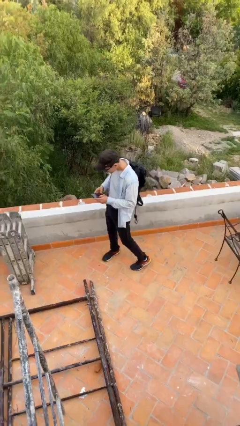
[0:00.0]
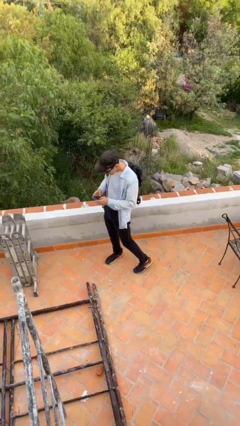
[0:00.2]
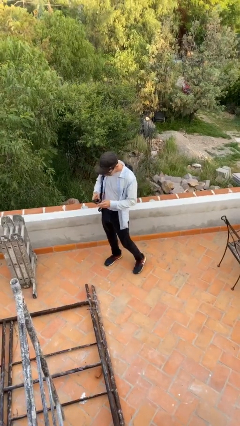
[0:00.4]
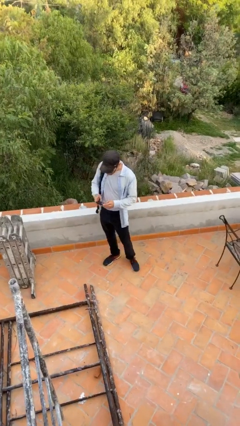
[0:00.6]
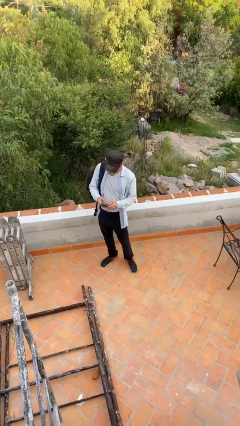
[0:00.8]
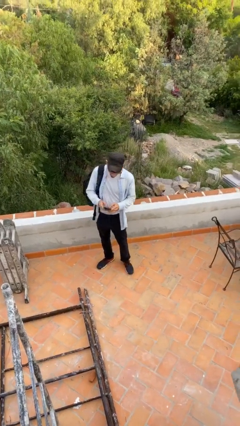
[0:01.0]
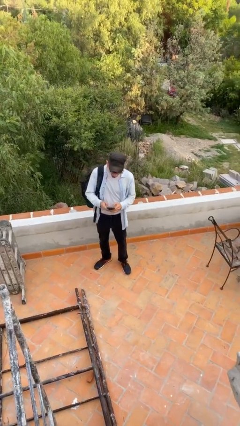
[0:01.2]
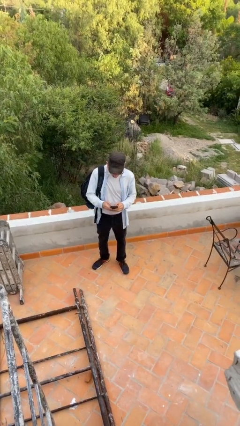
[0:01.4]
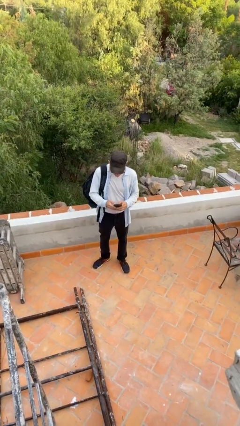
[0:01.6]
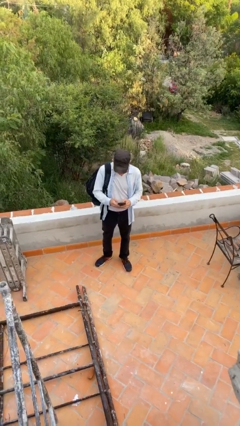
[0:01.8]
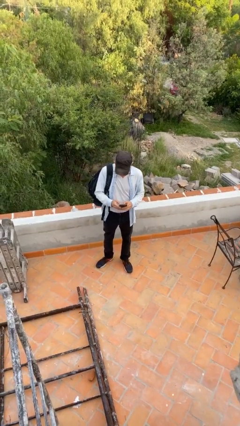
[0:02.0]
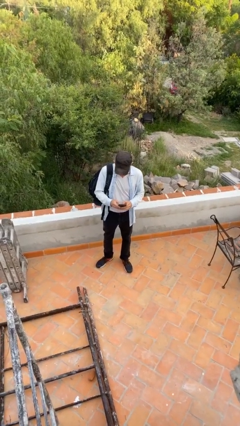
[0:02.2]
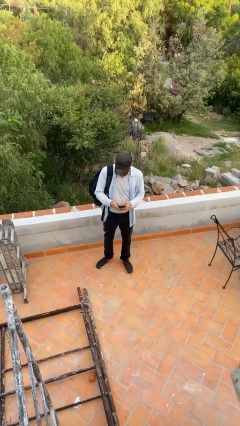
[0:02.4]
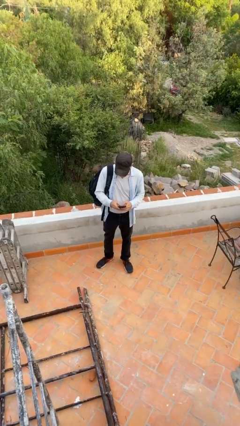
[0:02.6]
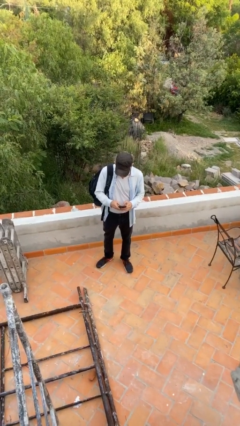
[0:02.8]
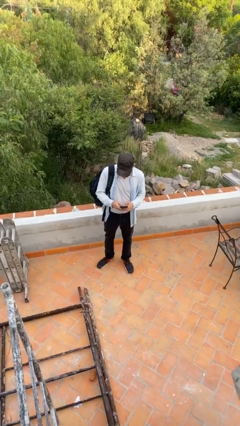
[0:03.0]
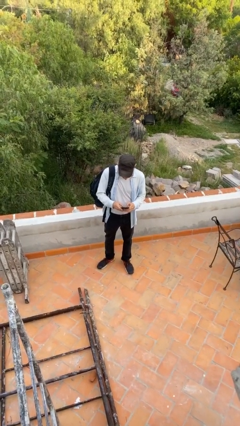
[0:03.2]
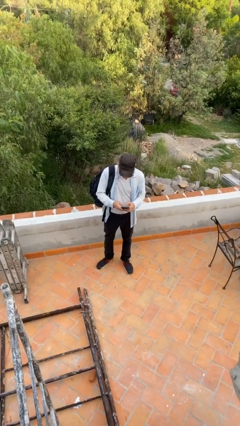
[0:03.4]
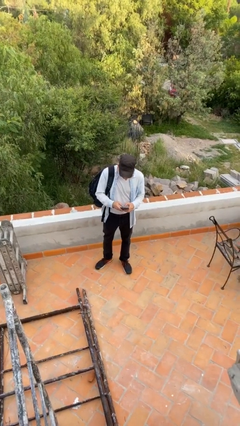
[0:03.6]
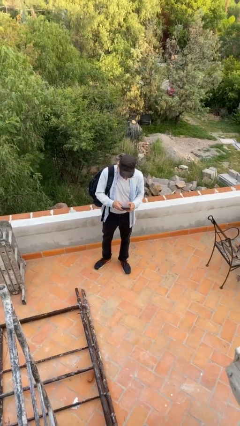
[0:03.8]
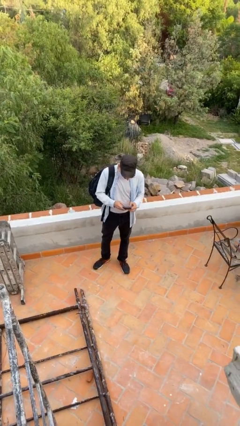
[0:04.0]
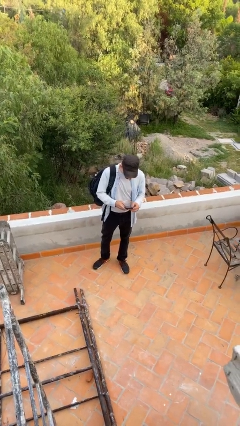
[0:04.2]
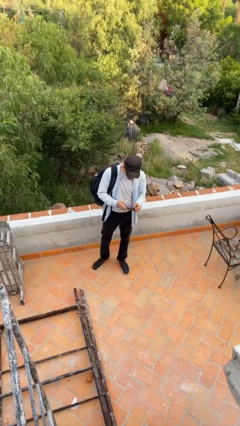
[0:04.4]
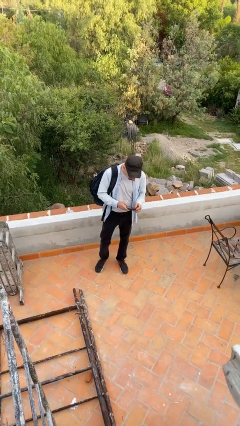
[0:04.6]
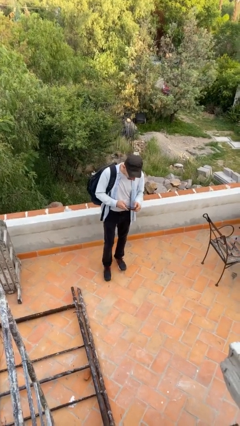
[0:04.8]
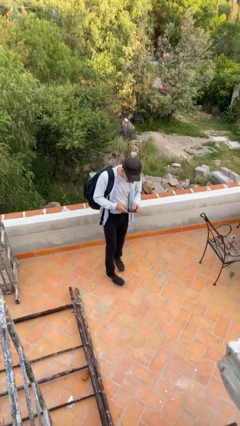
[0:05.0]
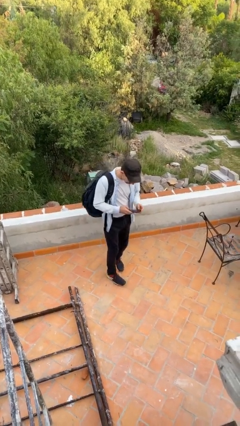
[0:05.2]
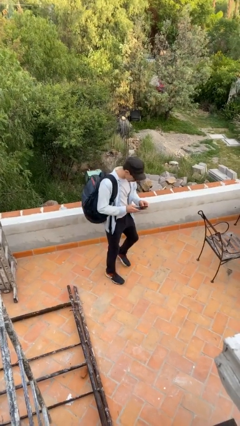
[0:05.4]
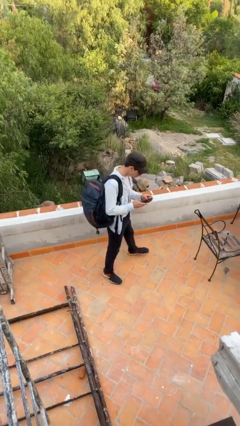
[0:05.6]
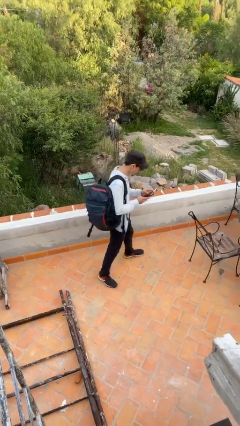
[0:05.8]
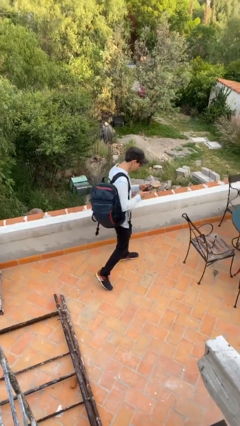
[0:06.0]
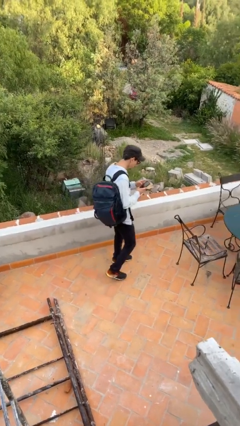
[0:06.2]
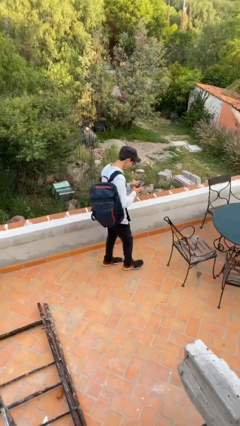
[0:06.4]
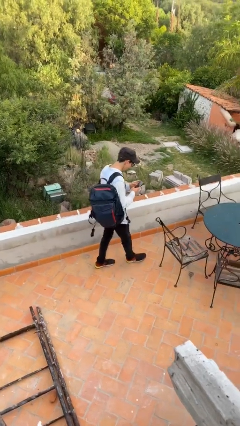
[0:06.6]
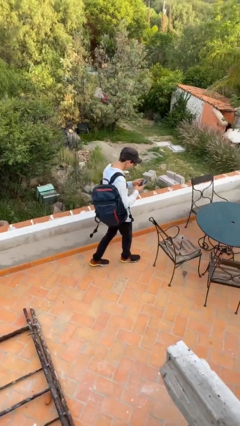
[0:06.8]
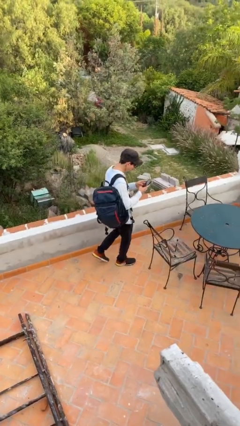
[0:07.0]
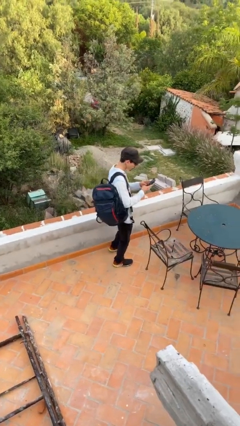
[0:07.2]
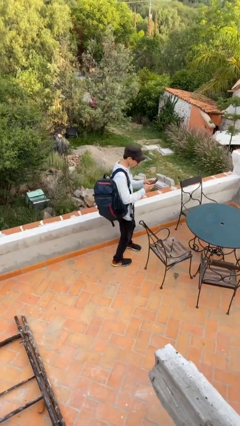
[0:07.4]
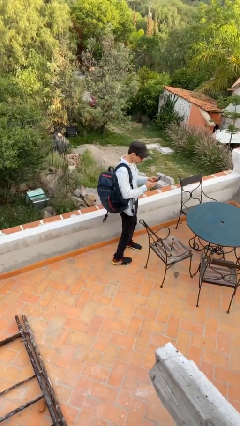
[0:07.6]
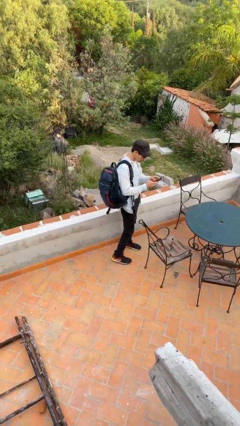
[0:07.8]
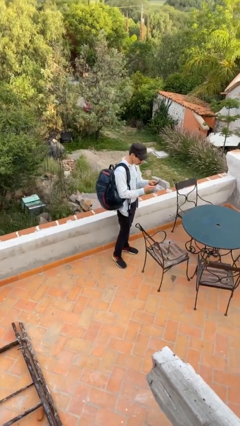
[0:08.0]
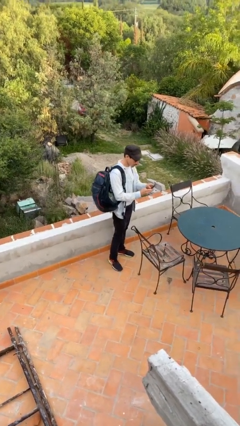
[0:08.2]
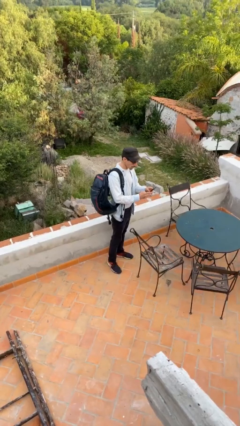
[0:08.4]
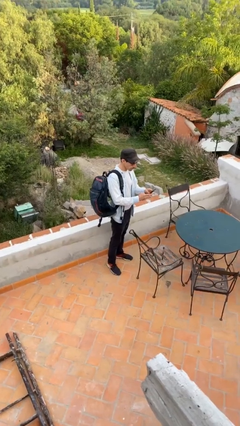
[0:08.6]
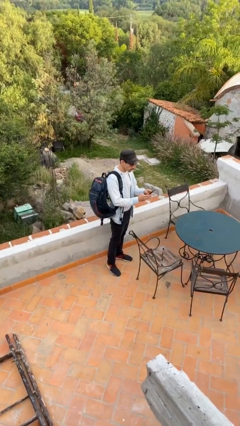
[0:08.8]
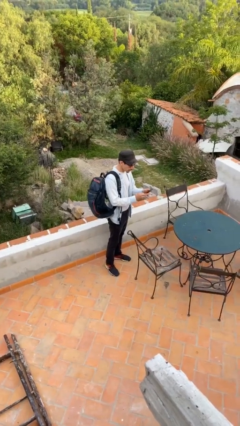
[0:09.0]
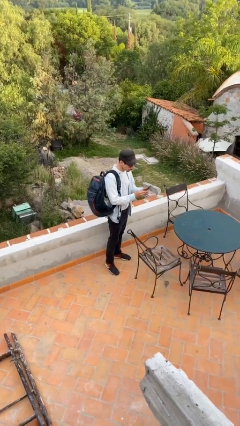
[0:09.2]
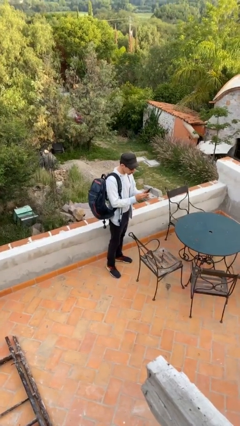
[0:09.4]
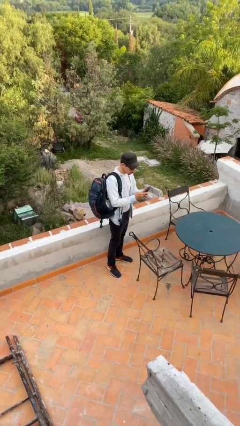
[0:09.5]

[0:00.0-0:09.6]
person texts on phone

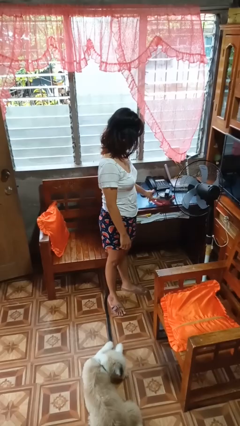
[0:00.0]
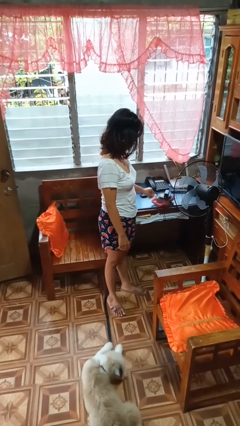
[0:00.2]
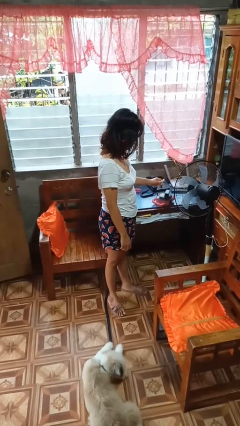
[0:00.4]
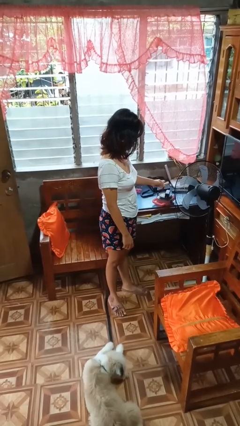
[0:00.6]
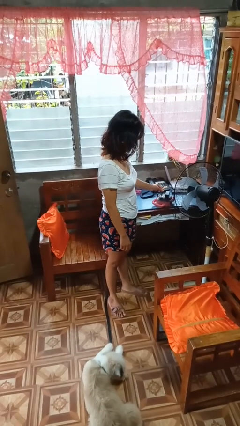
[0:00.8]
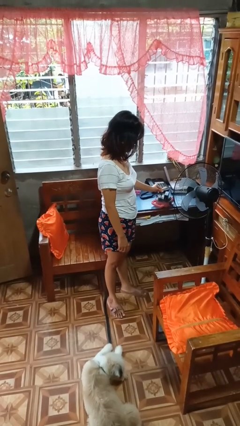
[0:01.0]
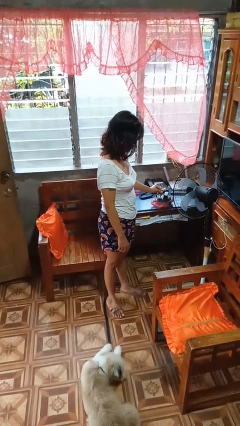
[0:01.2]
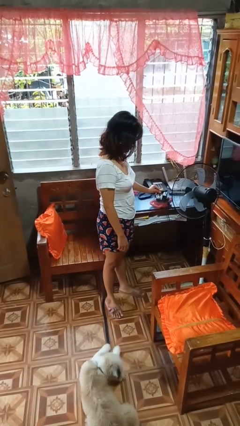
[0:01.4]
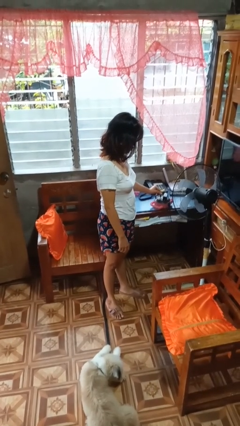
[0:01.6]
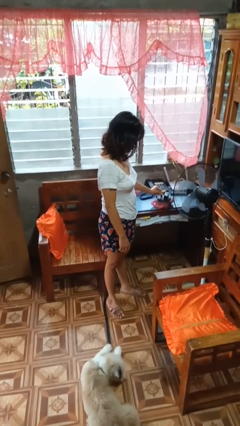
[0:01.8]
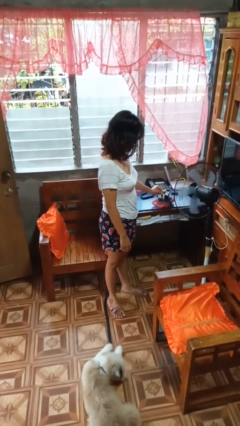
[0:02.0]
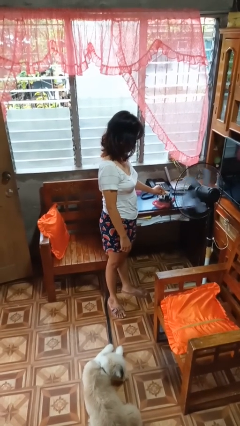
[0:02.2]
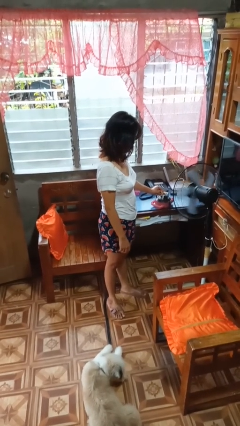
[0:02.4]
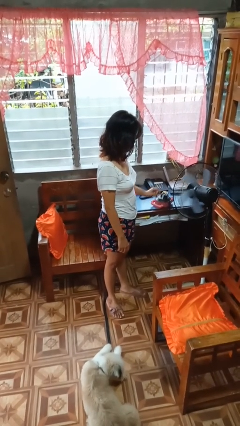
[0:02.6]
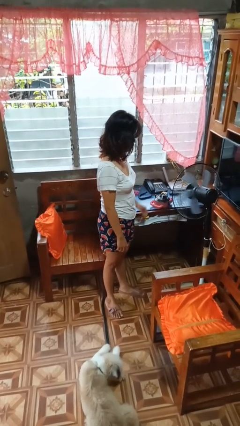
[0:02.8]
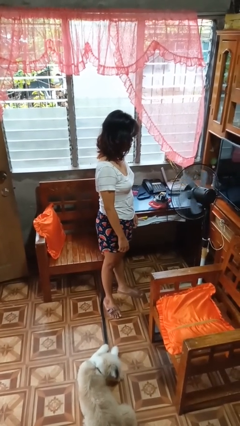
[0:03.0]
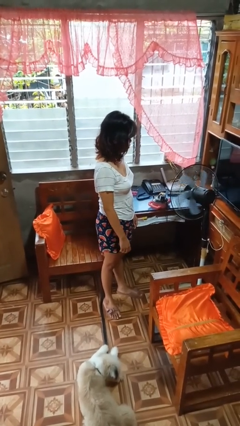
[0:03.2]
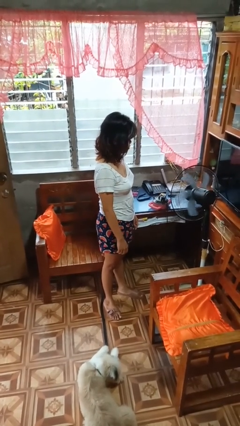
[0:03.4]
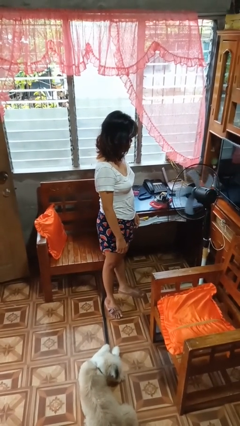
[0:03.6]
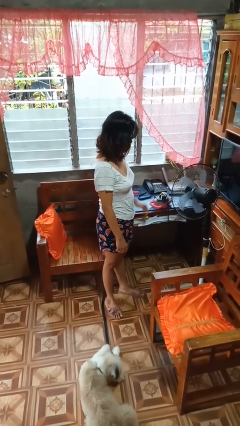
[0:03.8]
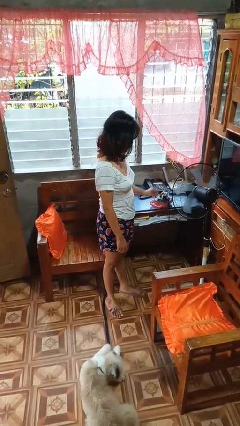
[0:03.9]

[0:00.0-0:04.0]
person plugs into electrical socket

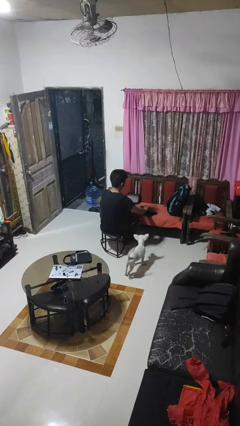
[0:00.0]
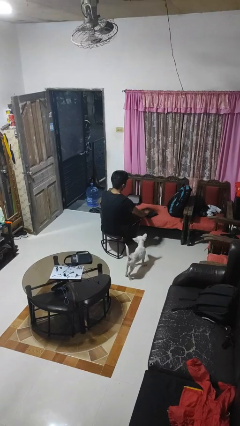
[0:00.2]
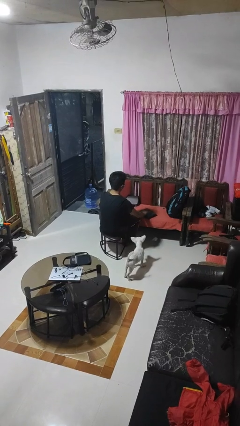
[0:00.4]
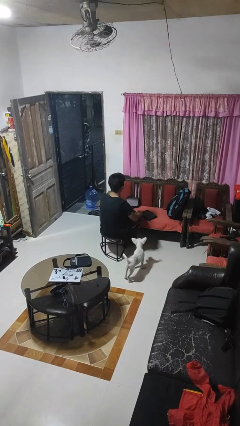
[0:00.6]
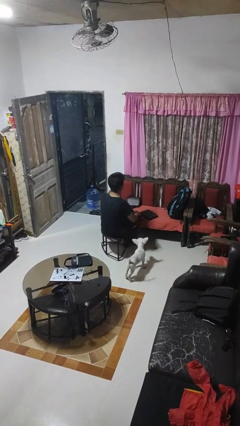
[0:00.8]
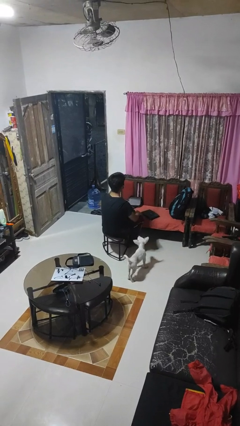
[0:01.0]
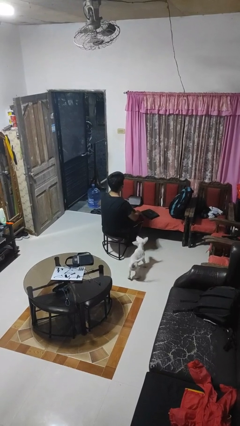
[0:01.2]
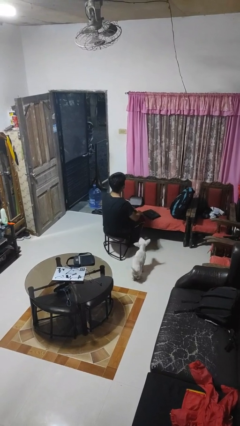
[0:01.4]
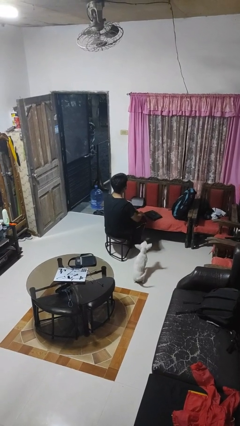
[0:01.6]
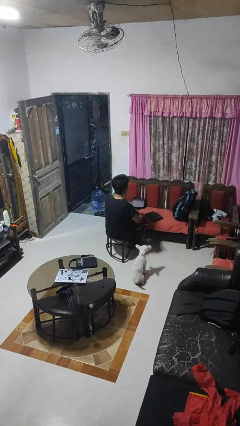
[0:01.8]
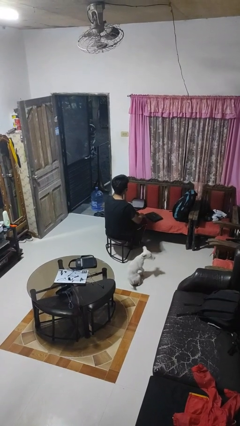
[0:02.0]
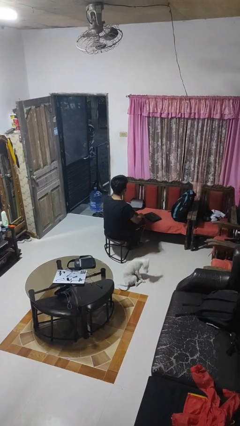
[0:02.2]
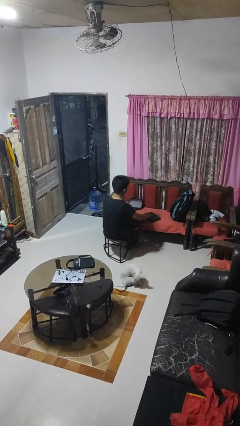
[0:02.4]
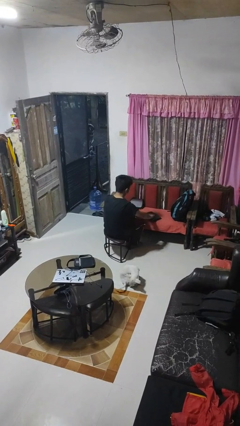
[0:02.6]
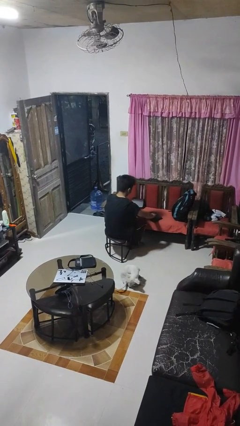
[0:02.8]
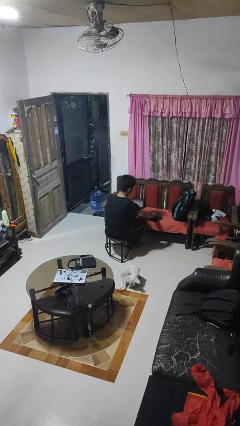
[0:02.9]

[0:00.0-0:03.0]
person closes laptop

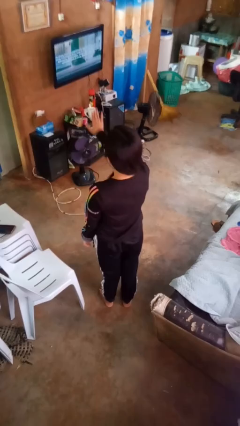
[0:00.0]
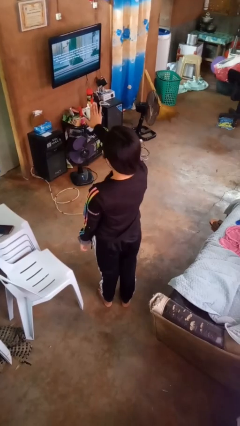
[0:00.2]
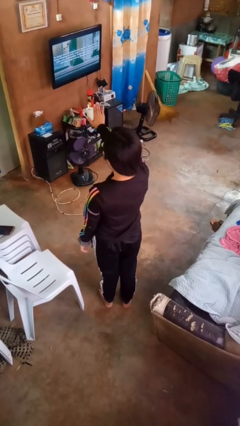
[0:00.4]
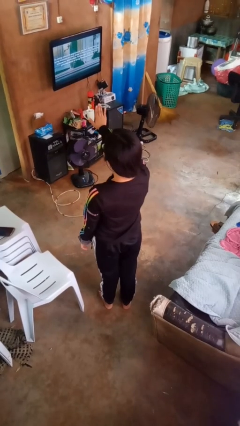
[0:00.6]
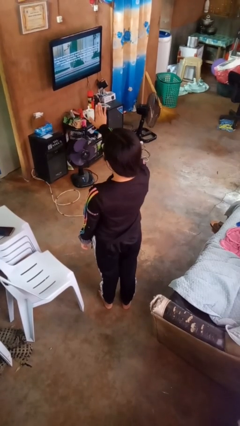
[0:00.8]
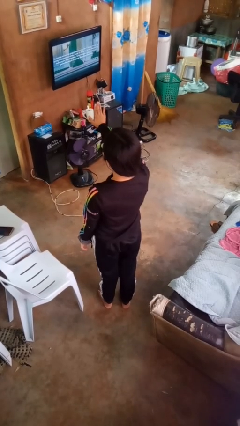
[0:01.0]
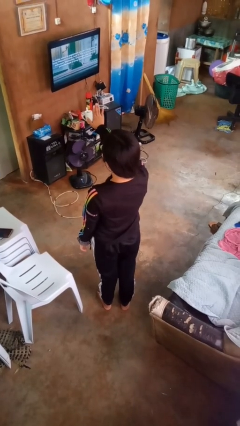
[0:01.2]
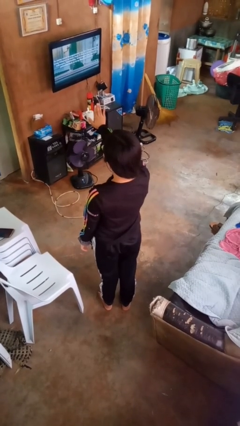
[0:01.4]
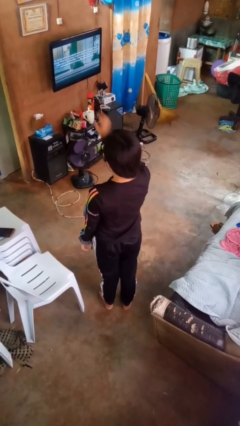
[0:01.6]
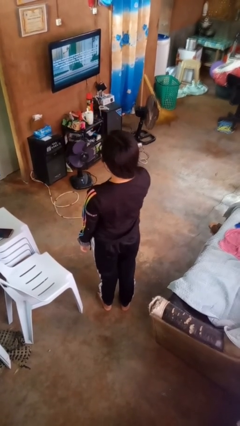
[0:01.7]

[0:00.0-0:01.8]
person gestures stop
